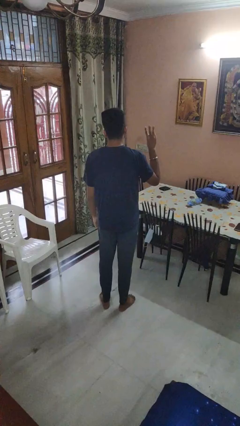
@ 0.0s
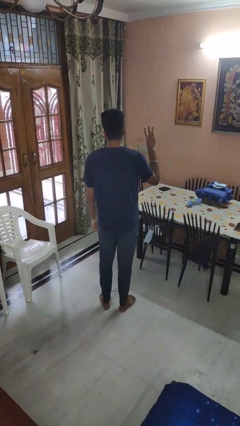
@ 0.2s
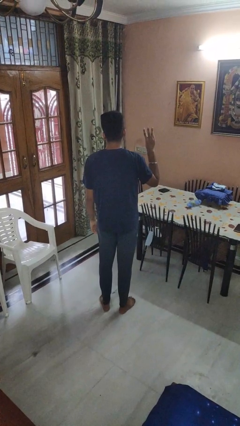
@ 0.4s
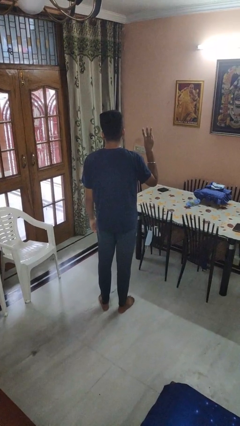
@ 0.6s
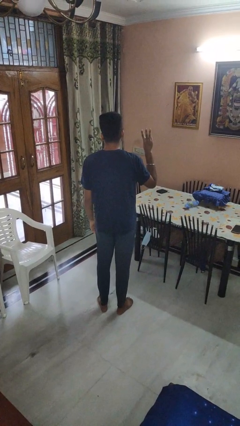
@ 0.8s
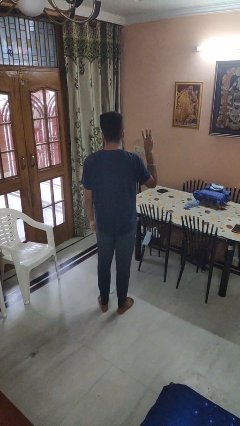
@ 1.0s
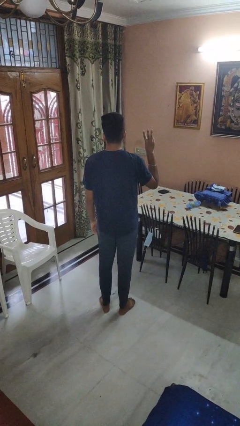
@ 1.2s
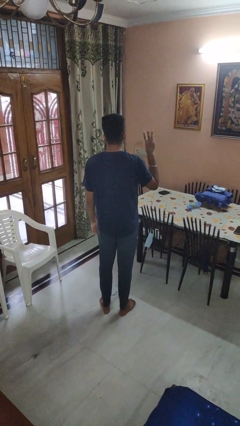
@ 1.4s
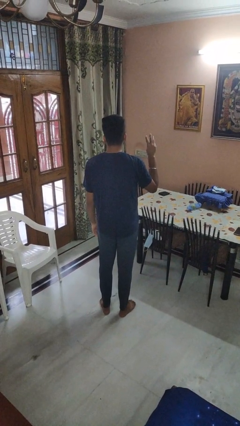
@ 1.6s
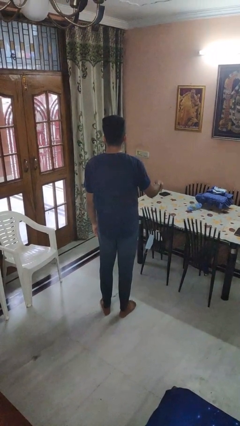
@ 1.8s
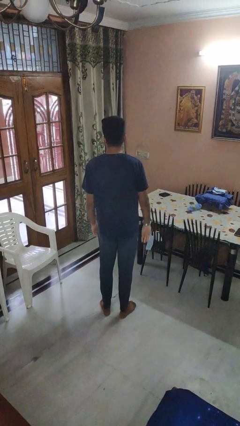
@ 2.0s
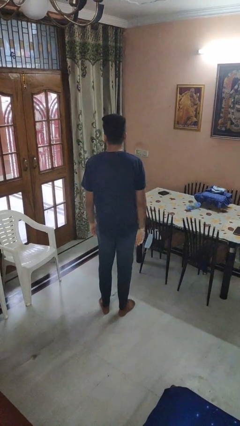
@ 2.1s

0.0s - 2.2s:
person gestures number three

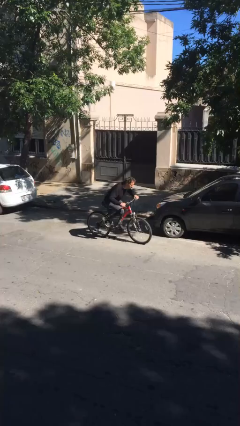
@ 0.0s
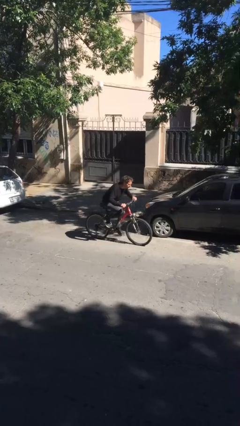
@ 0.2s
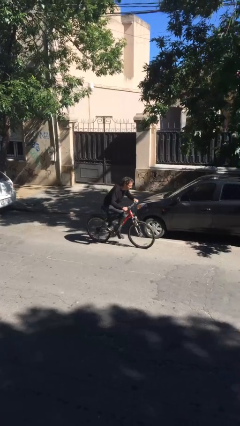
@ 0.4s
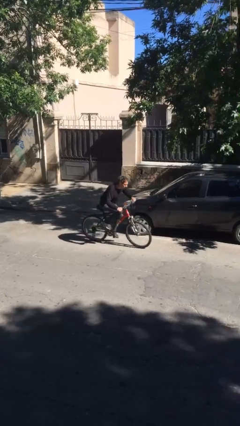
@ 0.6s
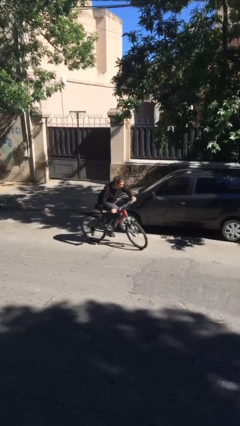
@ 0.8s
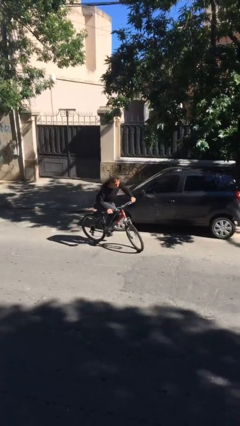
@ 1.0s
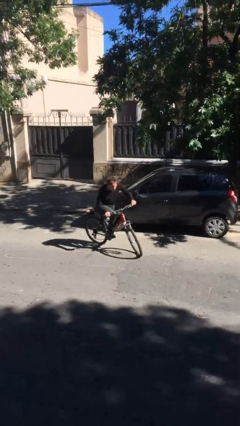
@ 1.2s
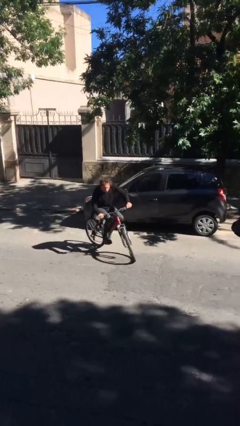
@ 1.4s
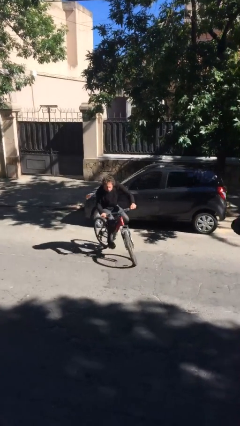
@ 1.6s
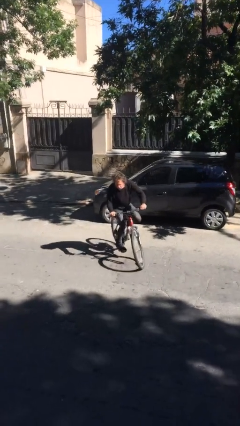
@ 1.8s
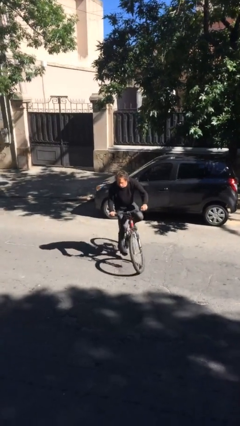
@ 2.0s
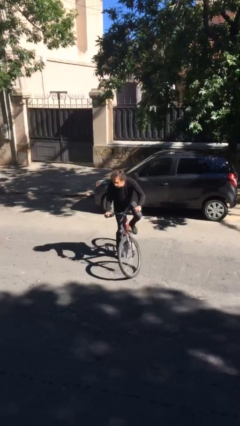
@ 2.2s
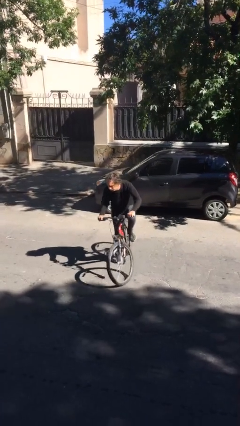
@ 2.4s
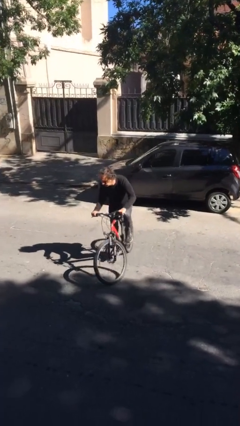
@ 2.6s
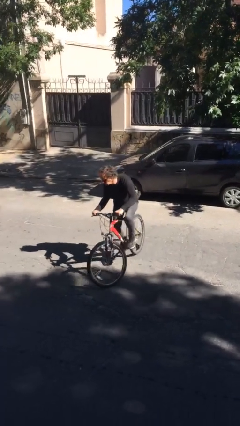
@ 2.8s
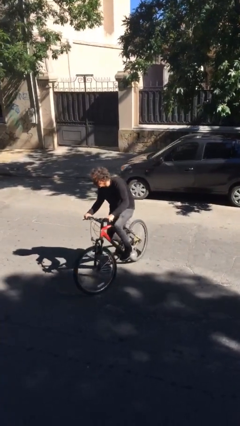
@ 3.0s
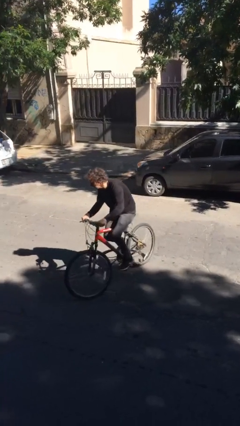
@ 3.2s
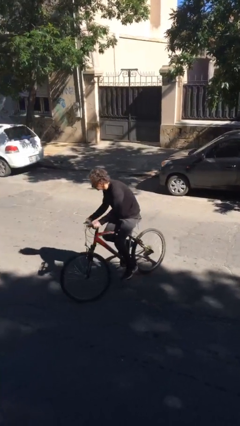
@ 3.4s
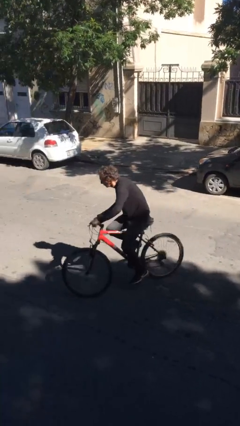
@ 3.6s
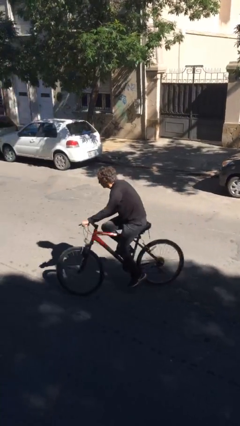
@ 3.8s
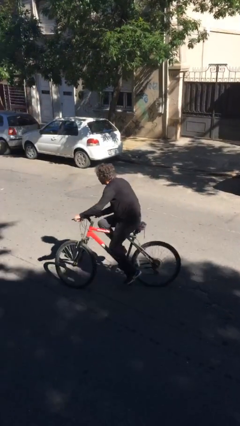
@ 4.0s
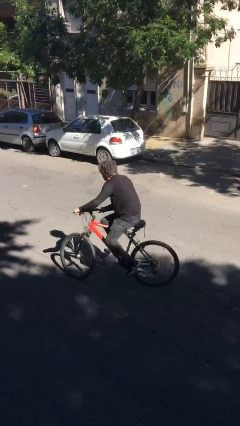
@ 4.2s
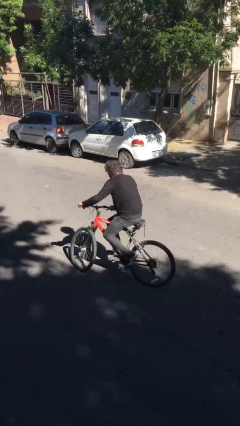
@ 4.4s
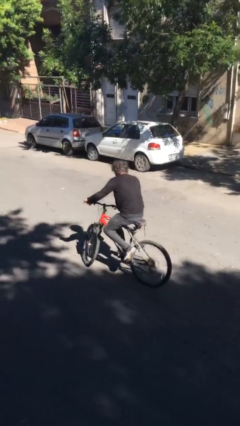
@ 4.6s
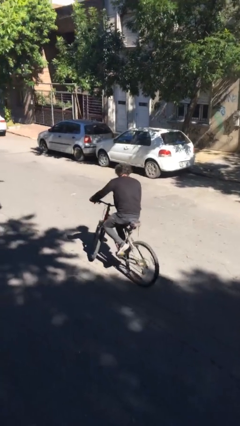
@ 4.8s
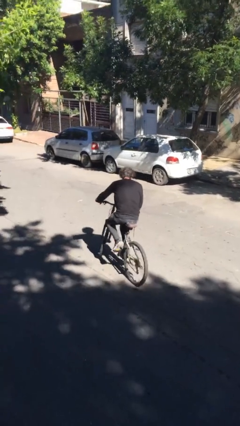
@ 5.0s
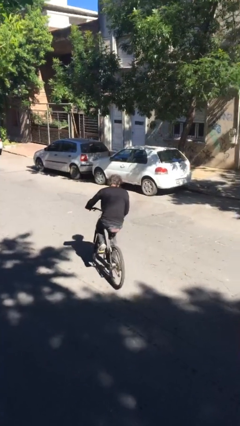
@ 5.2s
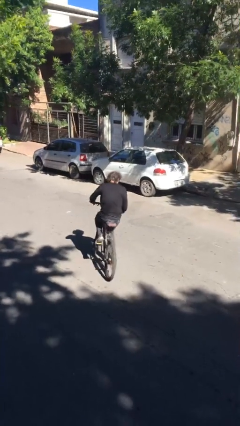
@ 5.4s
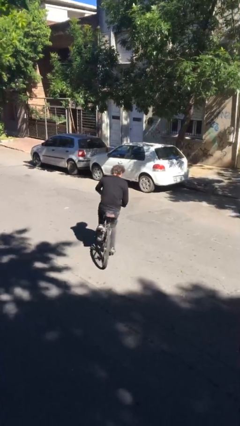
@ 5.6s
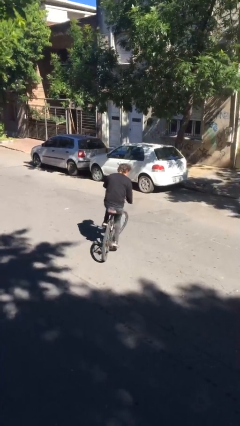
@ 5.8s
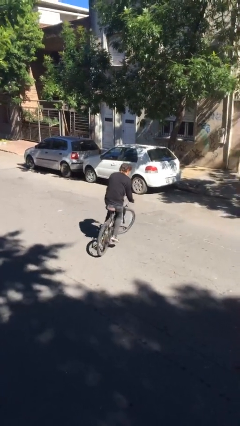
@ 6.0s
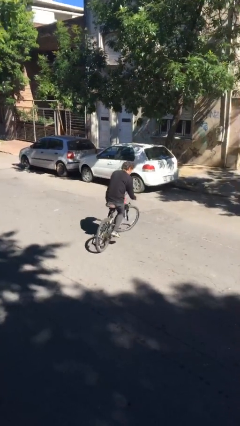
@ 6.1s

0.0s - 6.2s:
person rides bicycle

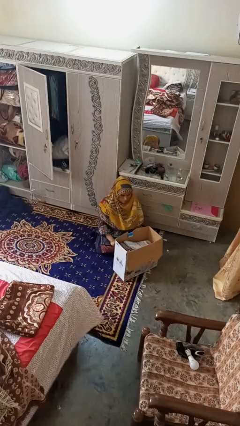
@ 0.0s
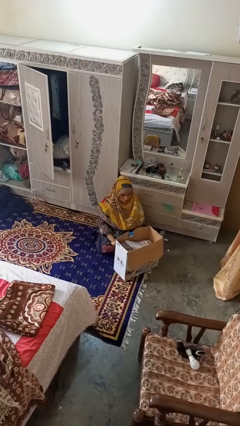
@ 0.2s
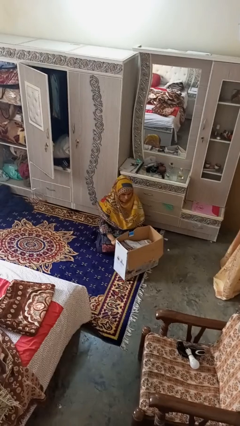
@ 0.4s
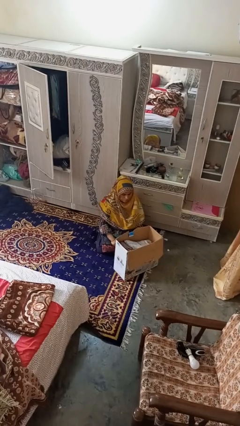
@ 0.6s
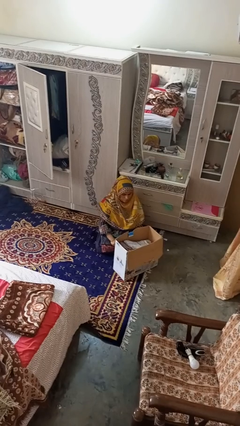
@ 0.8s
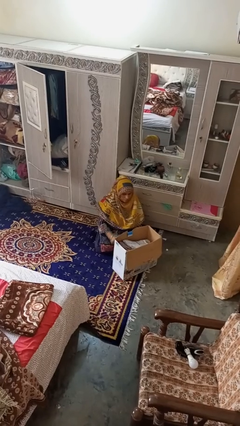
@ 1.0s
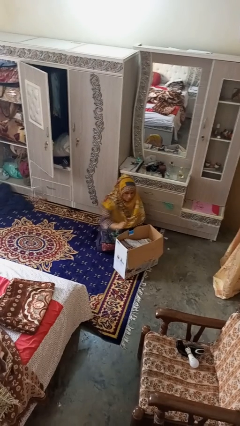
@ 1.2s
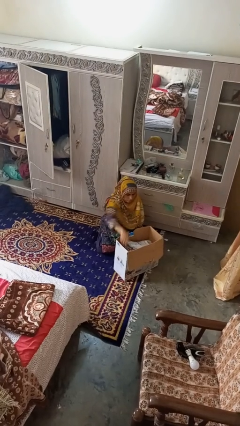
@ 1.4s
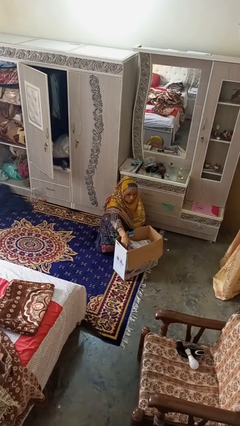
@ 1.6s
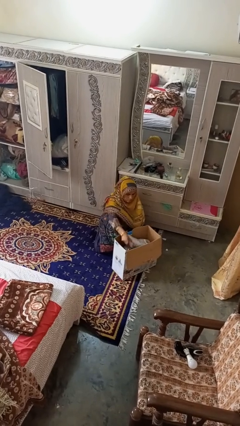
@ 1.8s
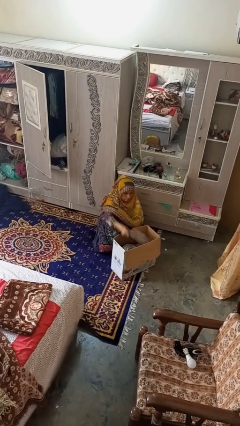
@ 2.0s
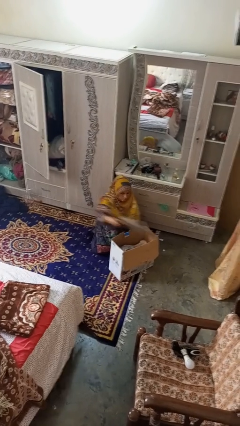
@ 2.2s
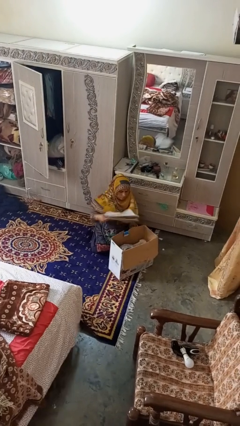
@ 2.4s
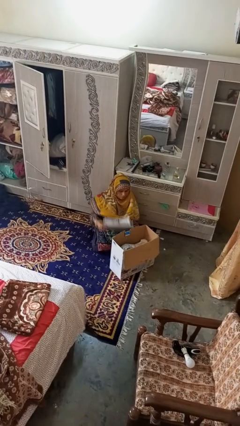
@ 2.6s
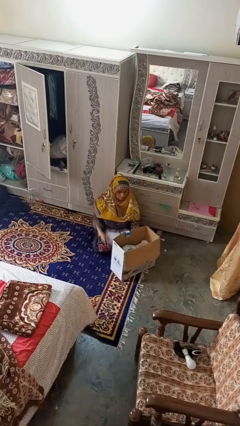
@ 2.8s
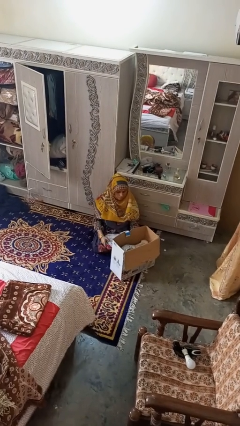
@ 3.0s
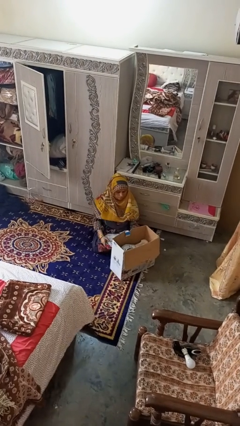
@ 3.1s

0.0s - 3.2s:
person takes object from box

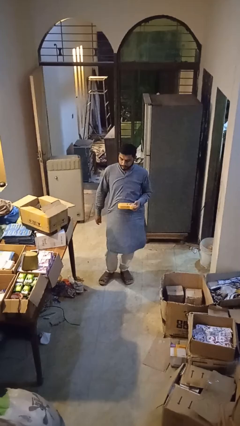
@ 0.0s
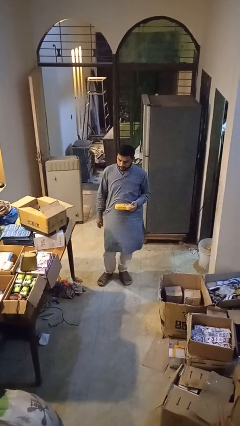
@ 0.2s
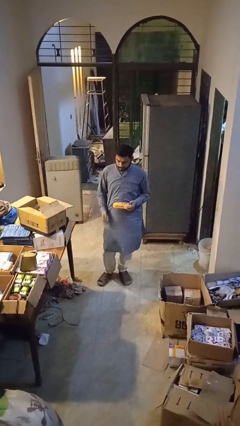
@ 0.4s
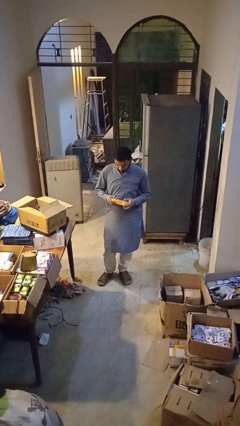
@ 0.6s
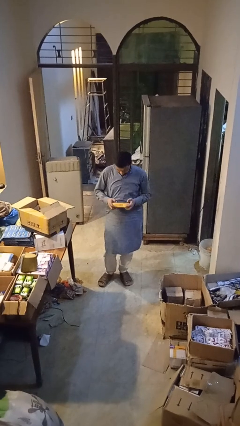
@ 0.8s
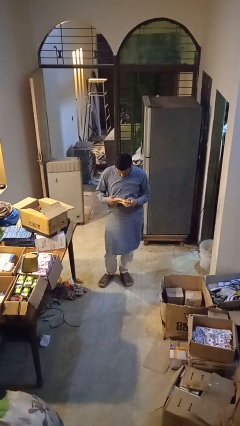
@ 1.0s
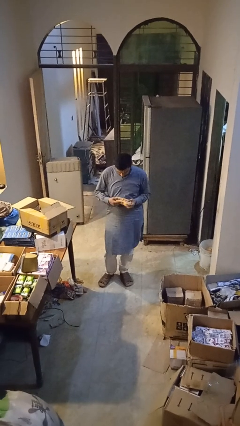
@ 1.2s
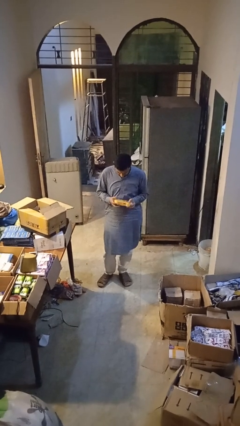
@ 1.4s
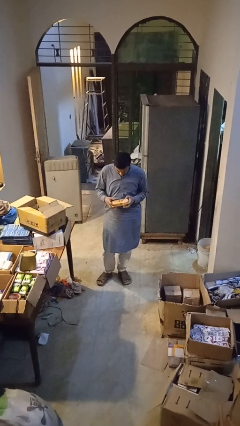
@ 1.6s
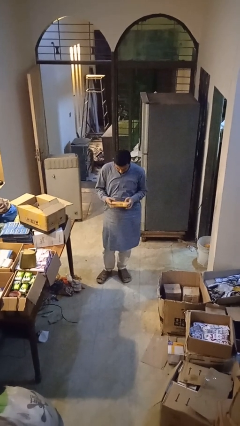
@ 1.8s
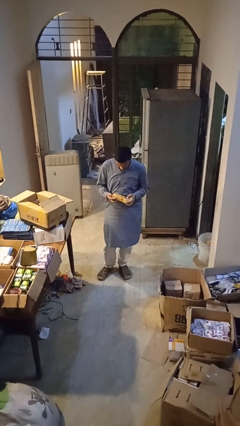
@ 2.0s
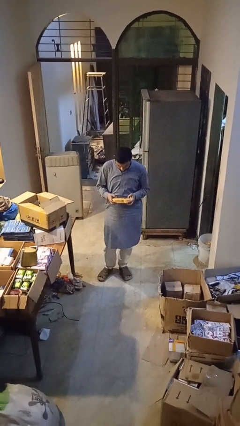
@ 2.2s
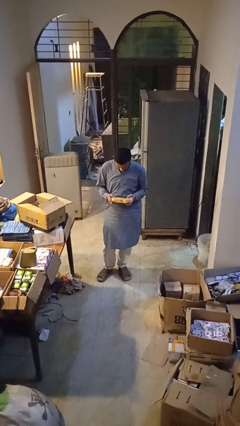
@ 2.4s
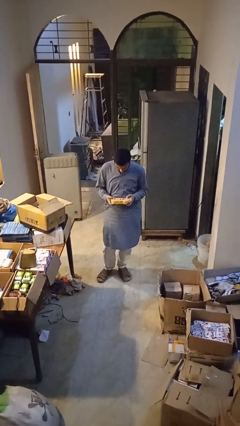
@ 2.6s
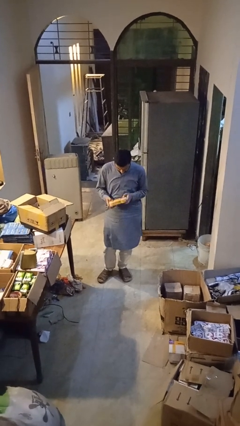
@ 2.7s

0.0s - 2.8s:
person interacts with handheld game

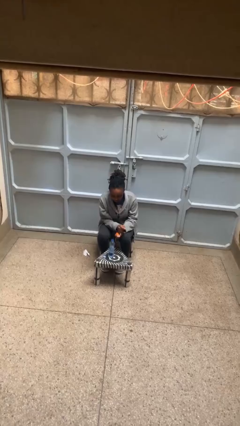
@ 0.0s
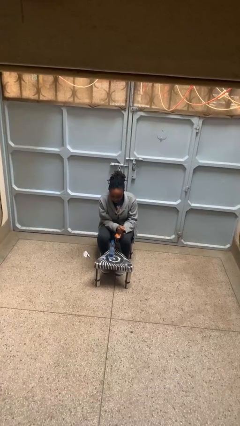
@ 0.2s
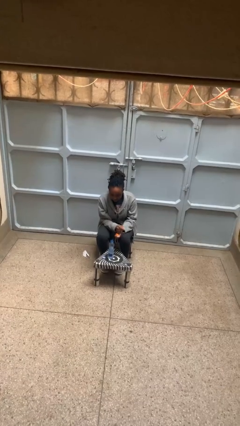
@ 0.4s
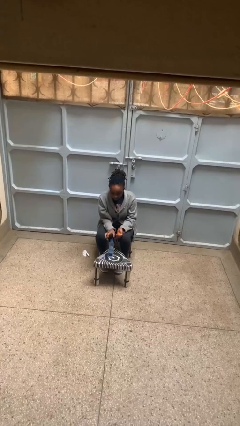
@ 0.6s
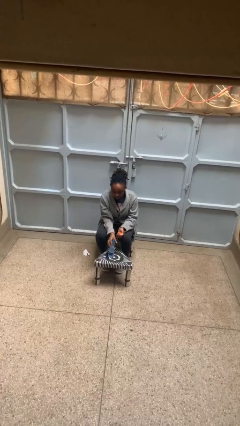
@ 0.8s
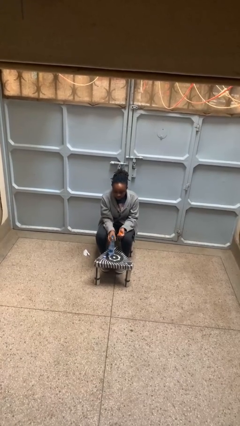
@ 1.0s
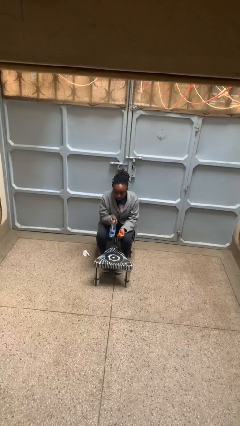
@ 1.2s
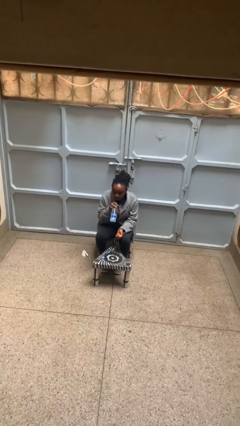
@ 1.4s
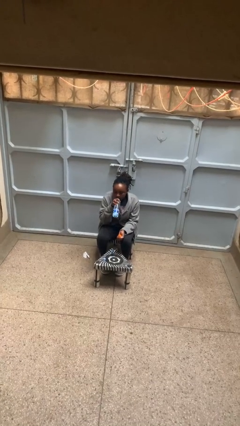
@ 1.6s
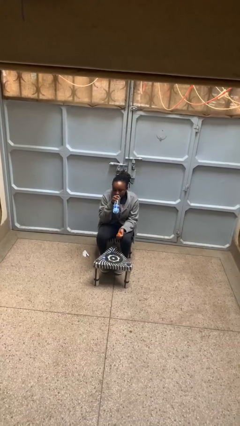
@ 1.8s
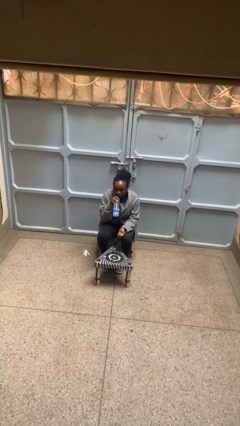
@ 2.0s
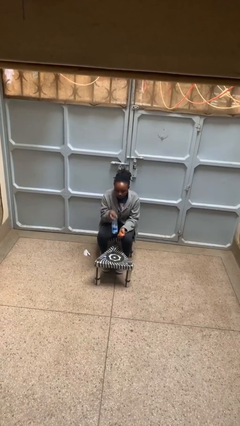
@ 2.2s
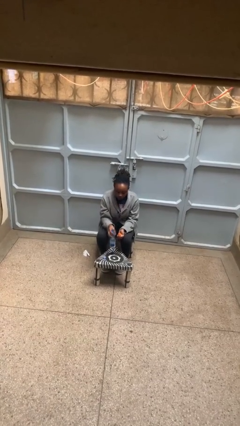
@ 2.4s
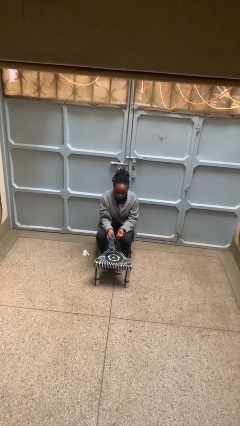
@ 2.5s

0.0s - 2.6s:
person drinks from cup

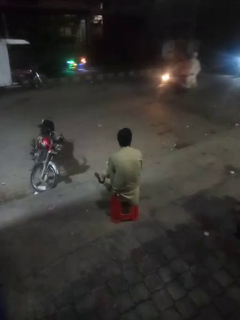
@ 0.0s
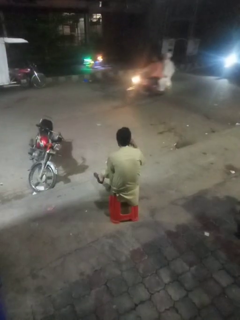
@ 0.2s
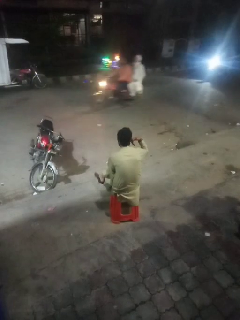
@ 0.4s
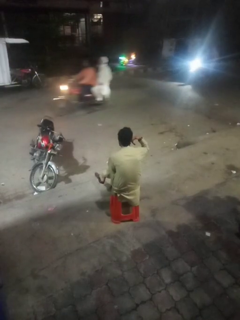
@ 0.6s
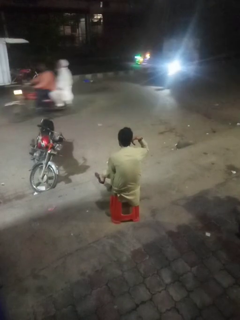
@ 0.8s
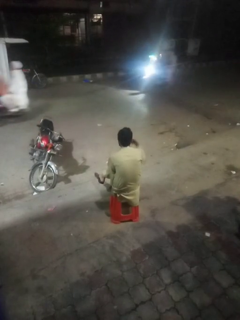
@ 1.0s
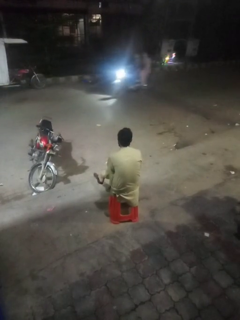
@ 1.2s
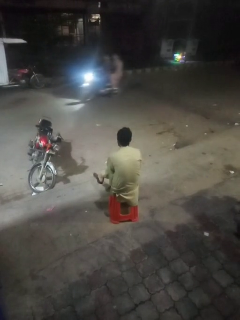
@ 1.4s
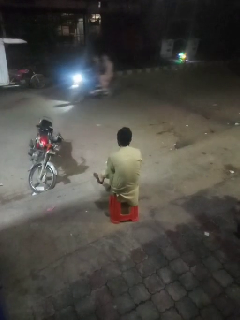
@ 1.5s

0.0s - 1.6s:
person gestures call me
